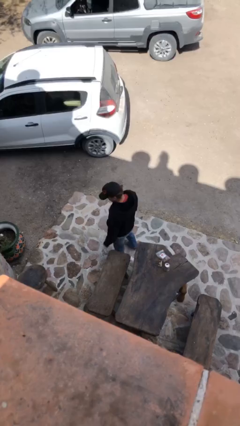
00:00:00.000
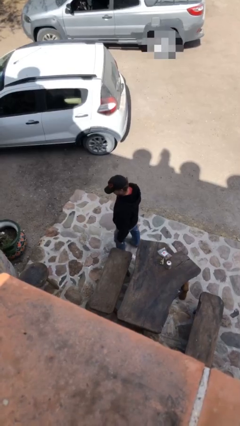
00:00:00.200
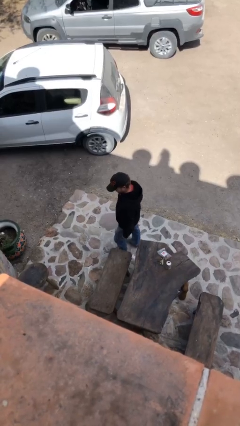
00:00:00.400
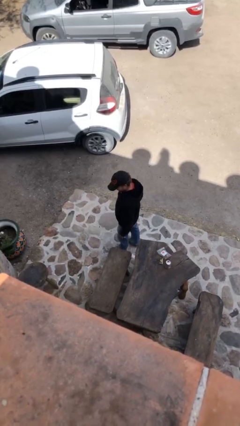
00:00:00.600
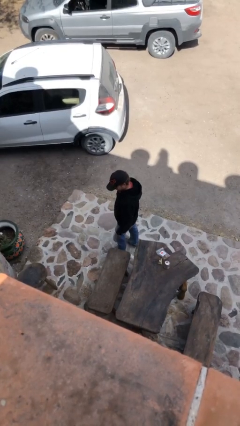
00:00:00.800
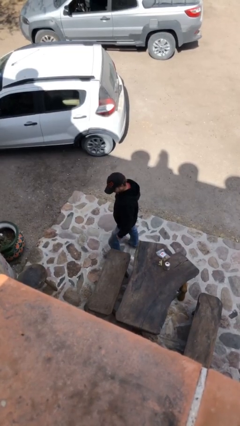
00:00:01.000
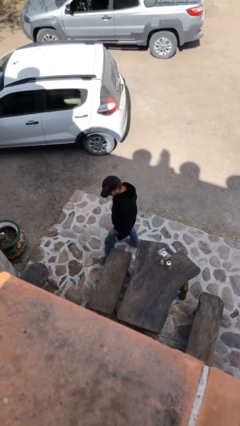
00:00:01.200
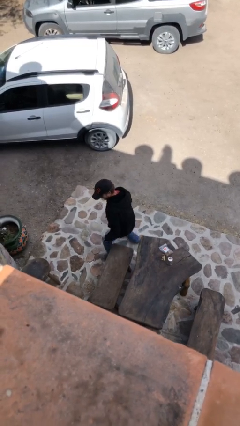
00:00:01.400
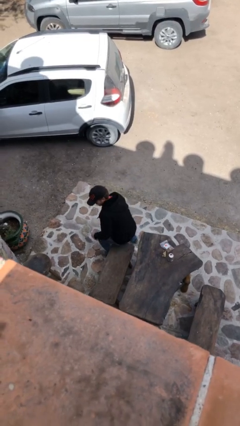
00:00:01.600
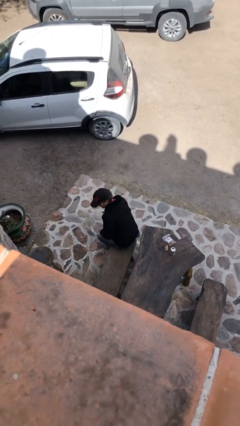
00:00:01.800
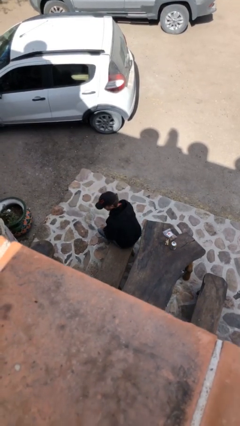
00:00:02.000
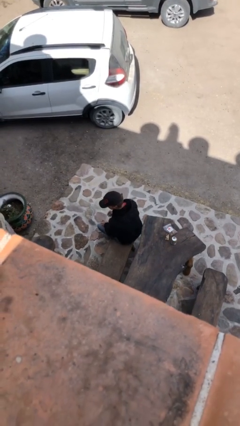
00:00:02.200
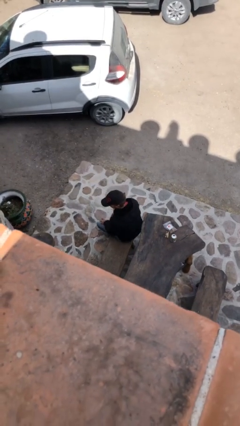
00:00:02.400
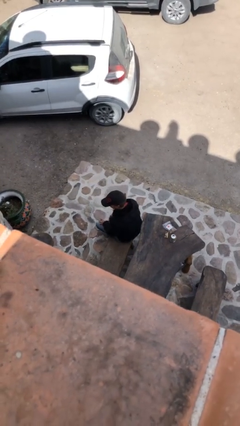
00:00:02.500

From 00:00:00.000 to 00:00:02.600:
person sits down

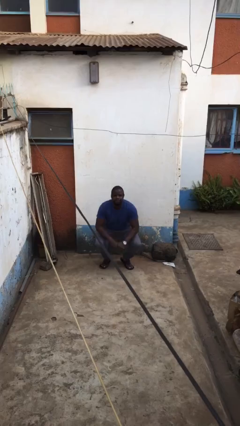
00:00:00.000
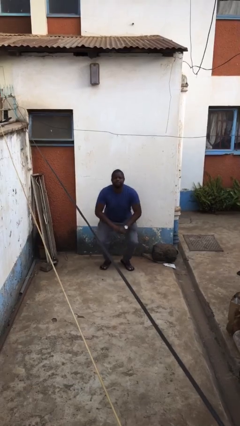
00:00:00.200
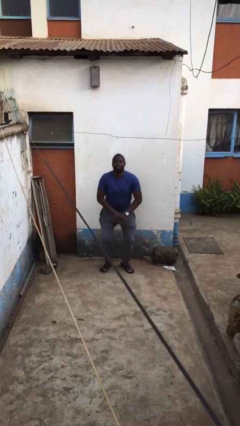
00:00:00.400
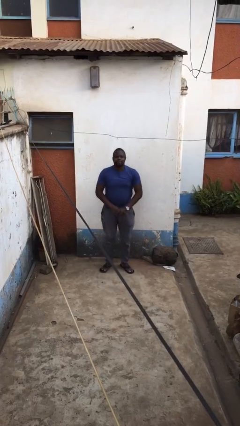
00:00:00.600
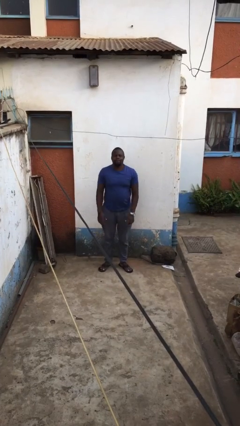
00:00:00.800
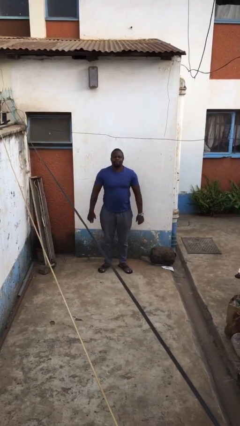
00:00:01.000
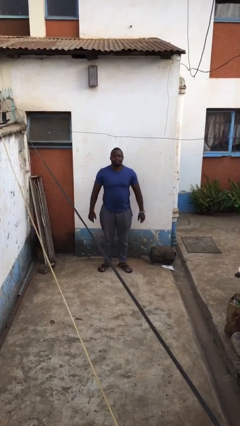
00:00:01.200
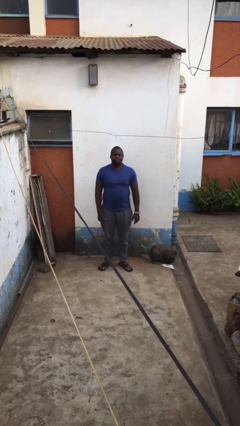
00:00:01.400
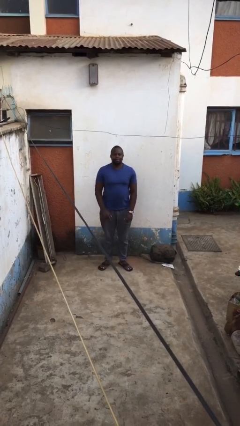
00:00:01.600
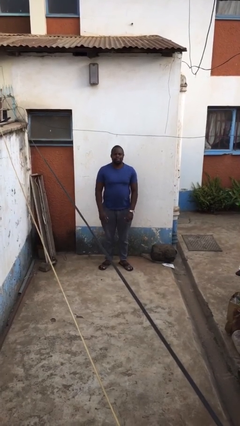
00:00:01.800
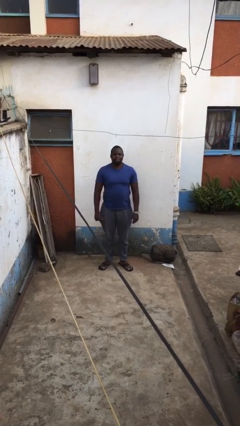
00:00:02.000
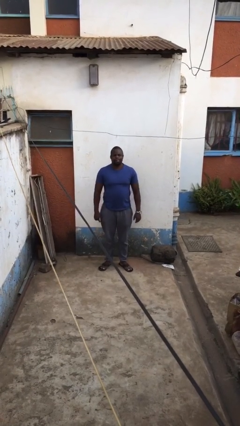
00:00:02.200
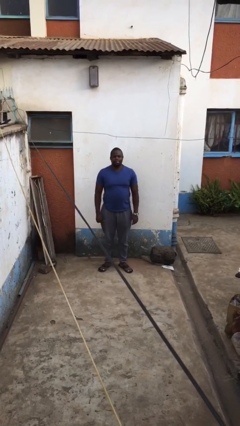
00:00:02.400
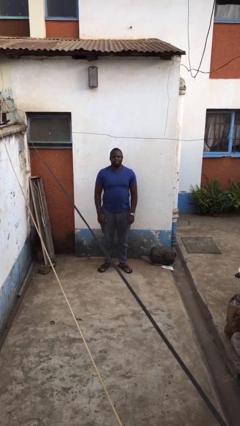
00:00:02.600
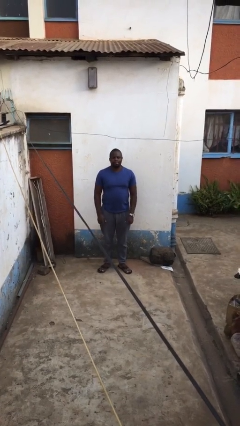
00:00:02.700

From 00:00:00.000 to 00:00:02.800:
person stands up

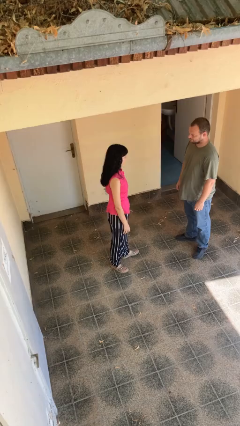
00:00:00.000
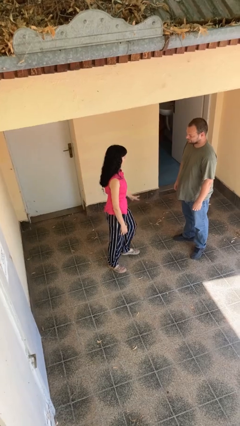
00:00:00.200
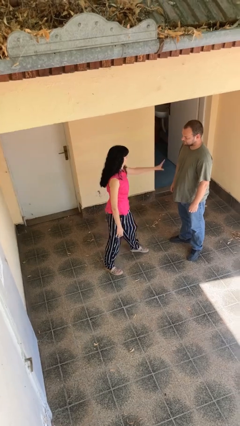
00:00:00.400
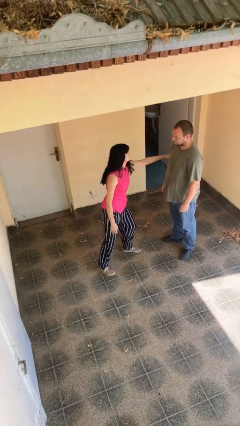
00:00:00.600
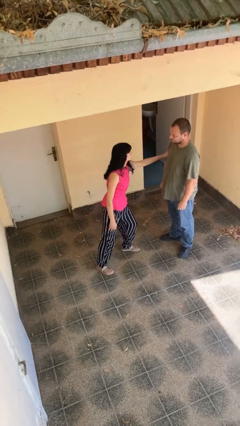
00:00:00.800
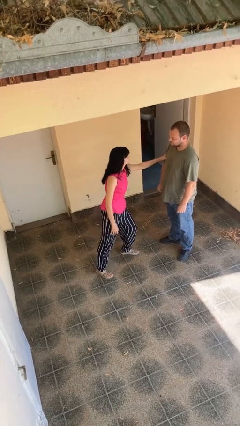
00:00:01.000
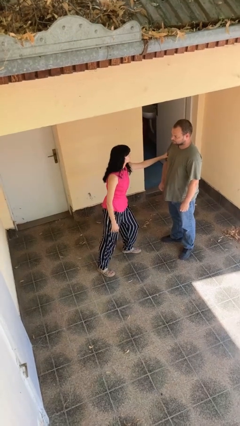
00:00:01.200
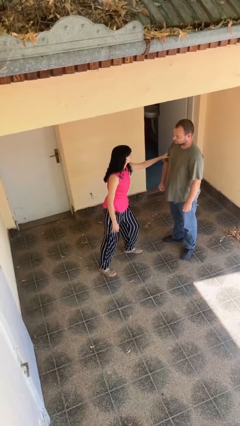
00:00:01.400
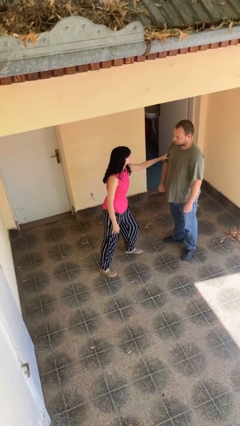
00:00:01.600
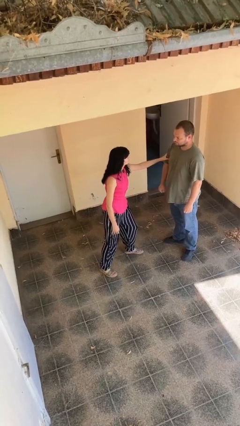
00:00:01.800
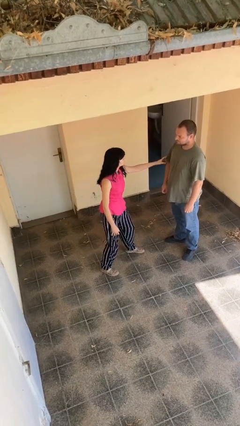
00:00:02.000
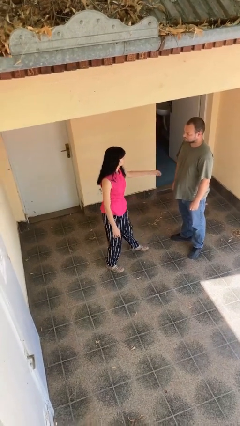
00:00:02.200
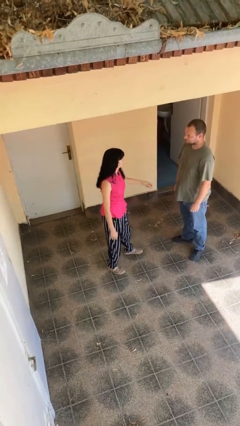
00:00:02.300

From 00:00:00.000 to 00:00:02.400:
person grabs person by bicep

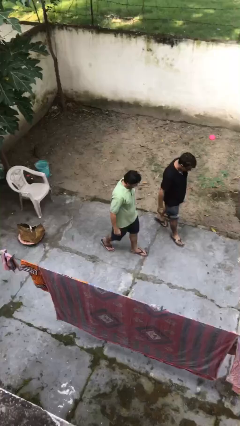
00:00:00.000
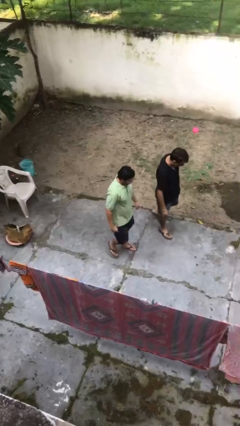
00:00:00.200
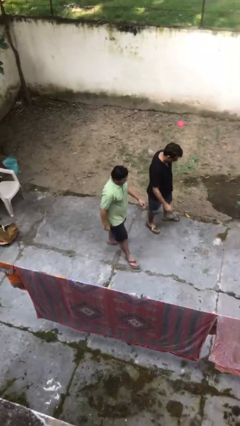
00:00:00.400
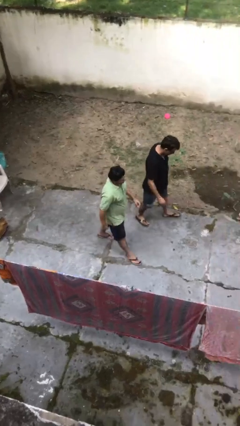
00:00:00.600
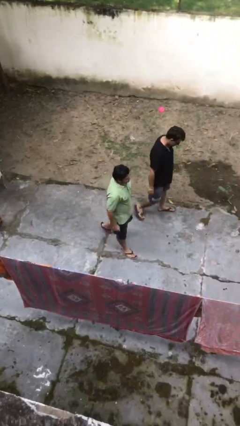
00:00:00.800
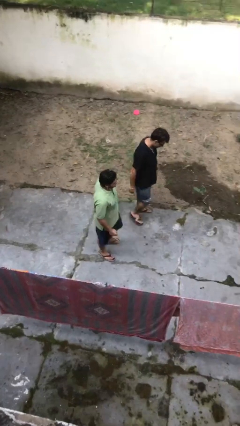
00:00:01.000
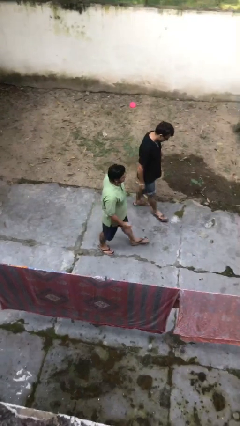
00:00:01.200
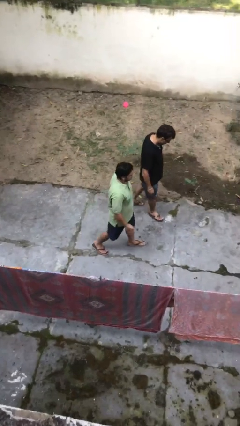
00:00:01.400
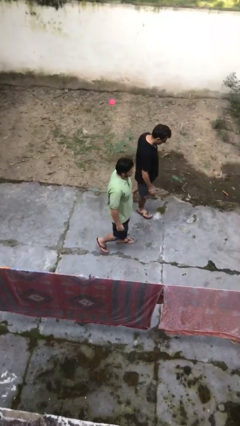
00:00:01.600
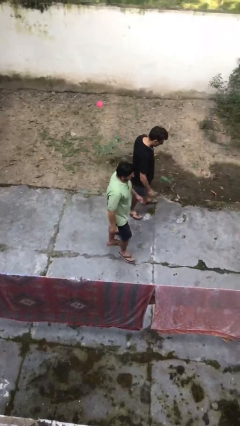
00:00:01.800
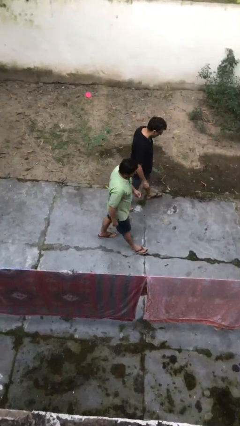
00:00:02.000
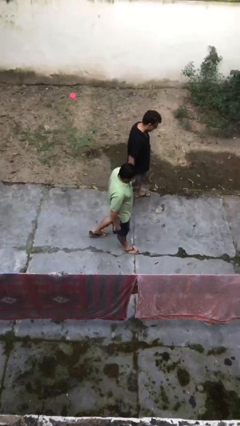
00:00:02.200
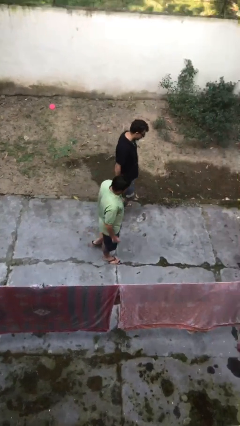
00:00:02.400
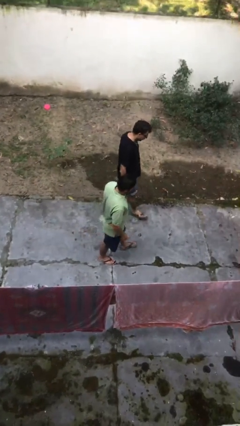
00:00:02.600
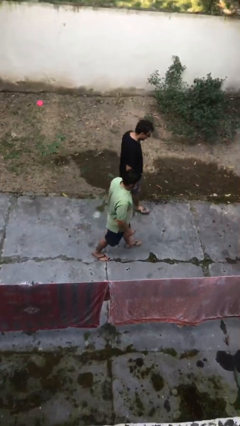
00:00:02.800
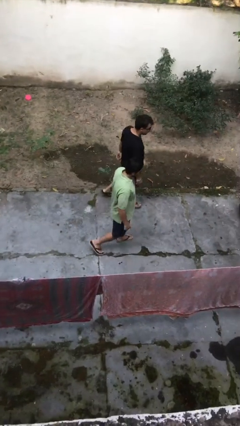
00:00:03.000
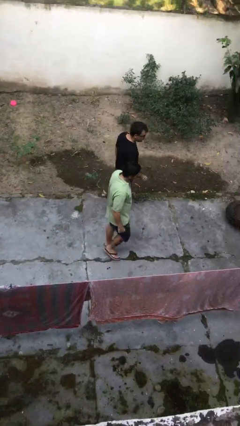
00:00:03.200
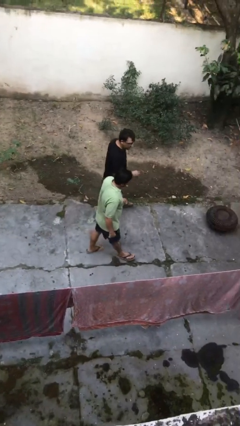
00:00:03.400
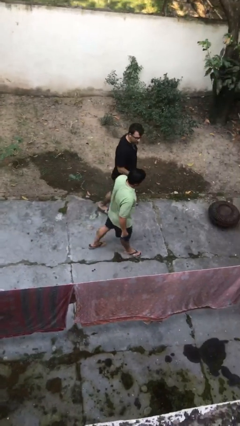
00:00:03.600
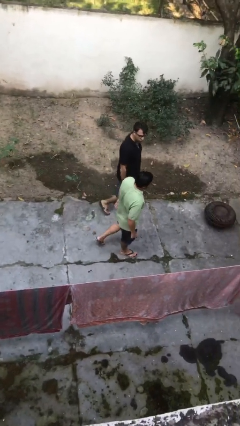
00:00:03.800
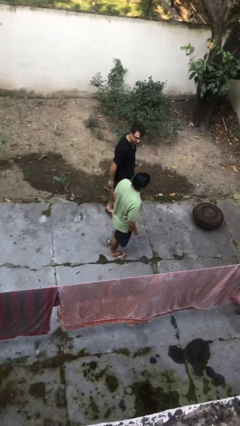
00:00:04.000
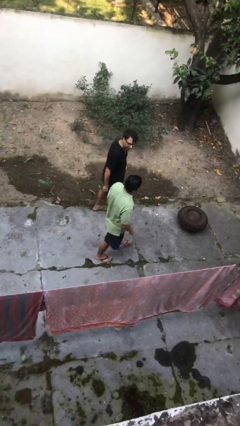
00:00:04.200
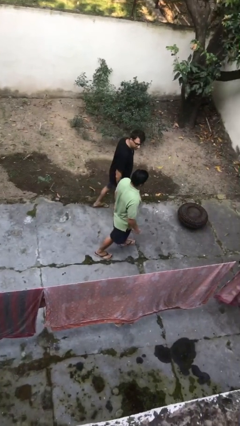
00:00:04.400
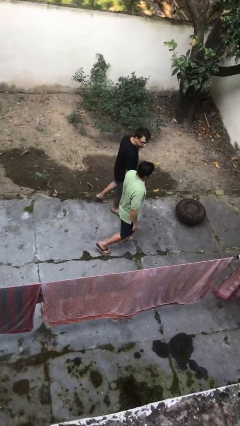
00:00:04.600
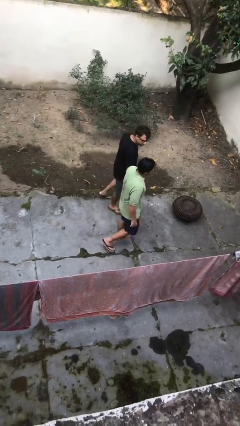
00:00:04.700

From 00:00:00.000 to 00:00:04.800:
person talks to person

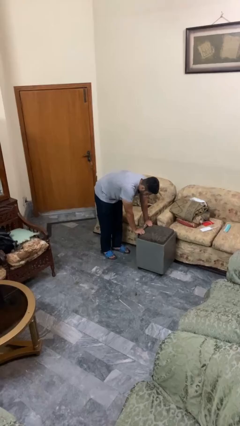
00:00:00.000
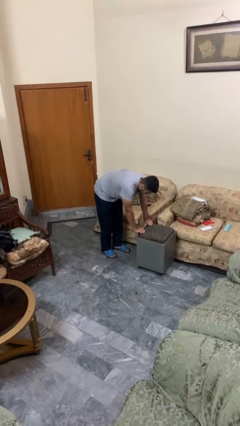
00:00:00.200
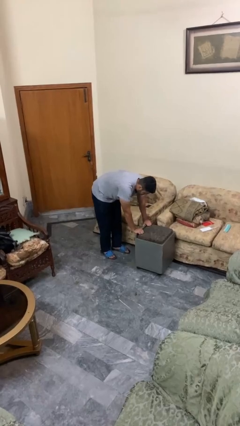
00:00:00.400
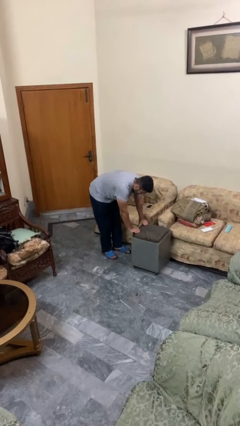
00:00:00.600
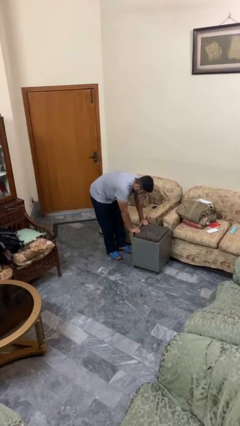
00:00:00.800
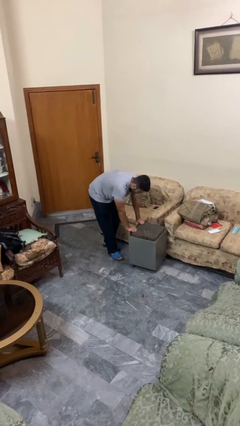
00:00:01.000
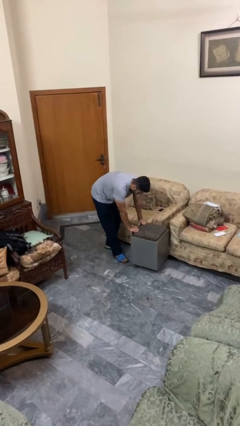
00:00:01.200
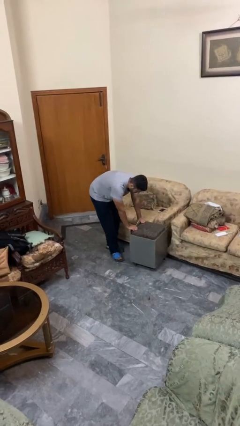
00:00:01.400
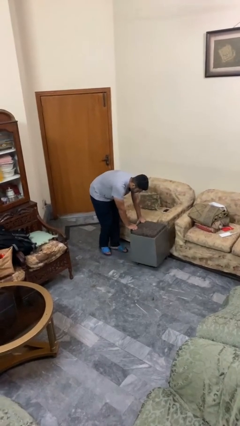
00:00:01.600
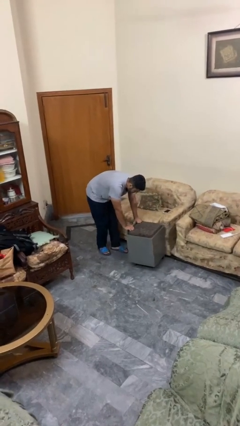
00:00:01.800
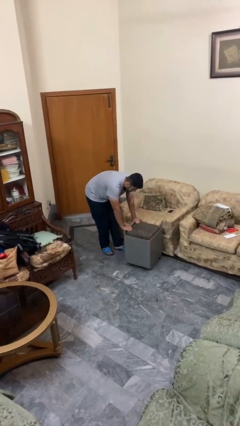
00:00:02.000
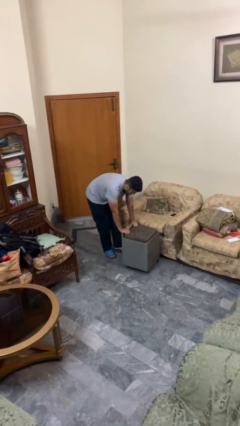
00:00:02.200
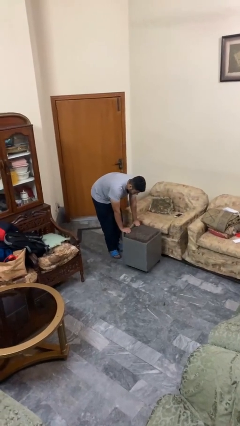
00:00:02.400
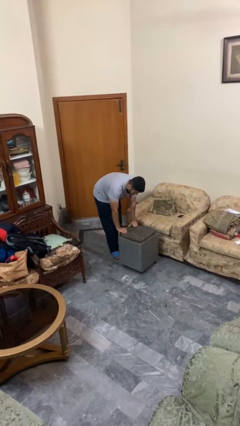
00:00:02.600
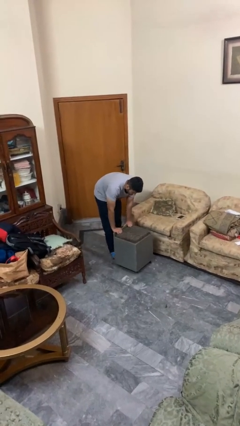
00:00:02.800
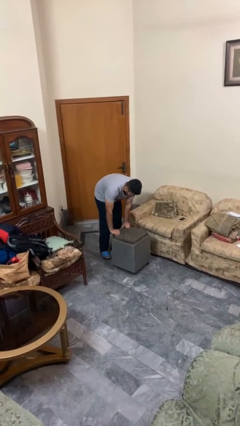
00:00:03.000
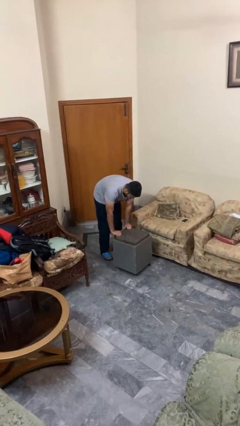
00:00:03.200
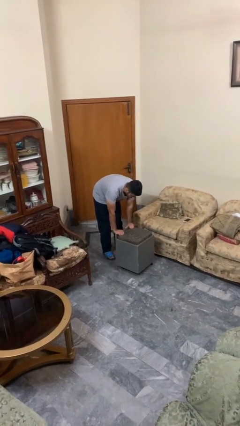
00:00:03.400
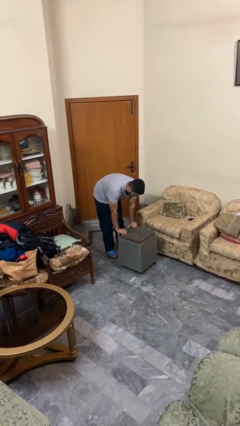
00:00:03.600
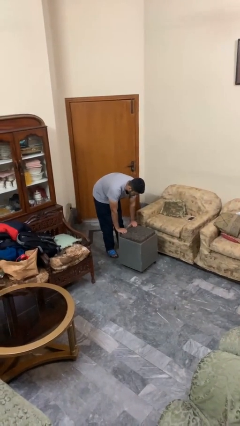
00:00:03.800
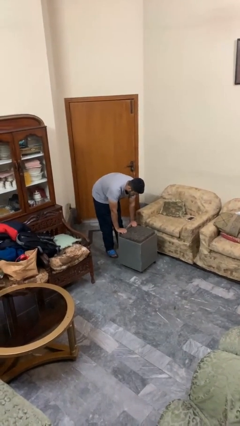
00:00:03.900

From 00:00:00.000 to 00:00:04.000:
person pulls wheeled cart

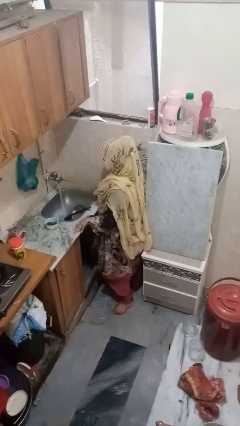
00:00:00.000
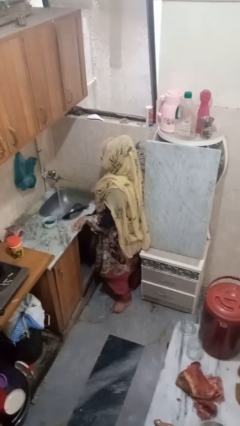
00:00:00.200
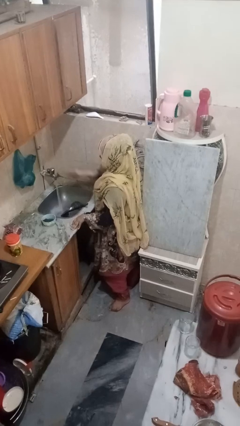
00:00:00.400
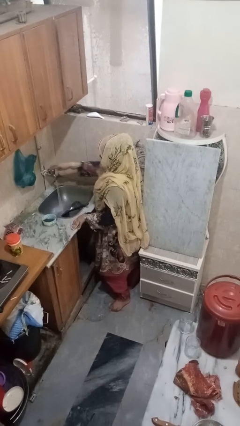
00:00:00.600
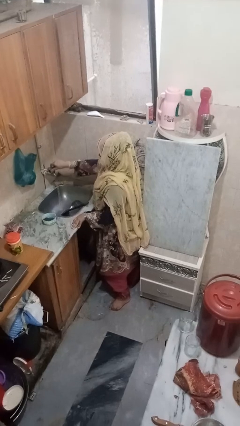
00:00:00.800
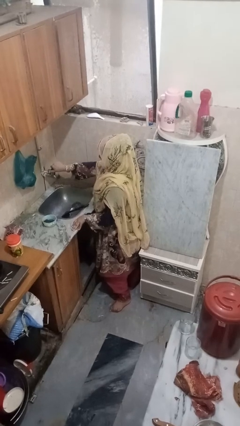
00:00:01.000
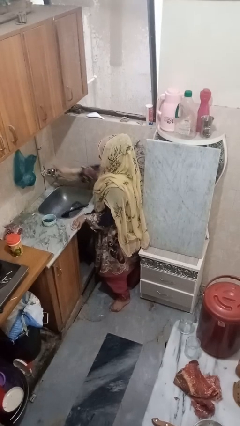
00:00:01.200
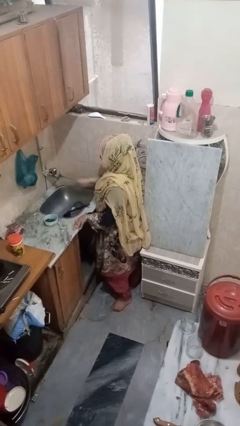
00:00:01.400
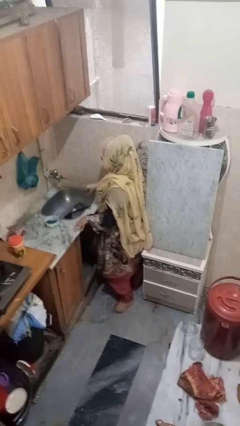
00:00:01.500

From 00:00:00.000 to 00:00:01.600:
person turns off faucet
